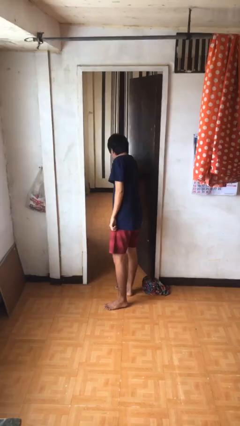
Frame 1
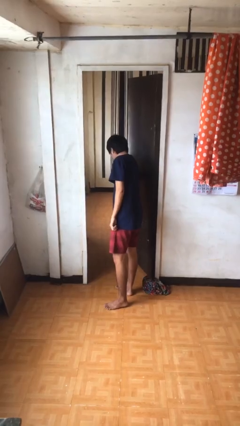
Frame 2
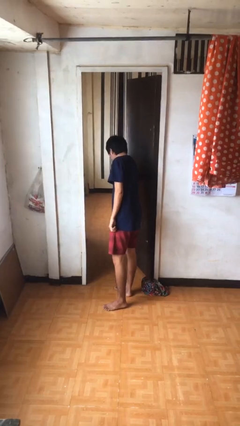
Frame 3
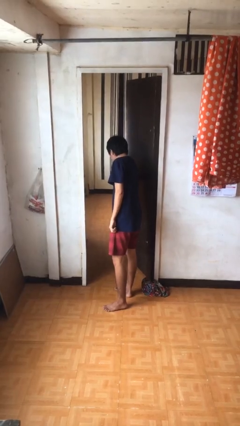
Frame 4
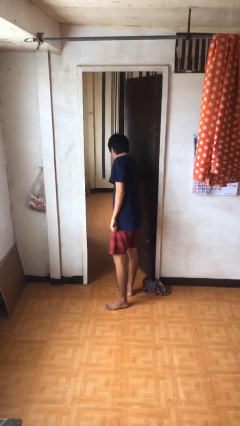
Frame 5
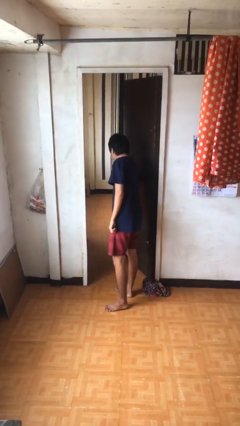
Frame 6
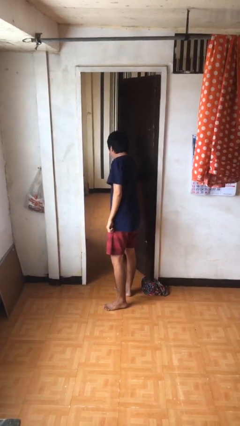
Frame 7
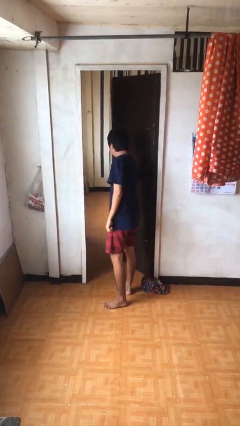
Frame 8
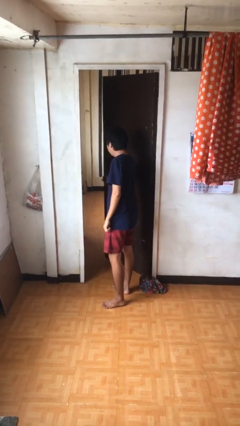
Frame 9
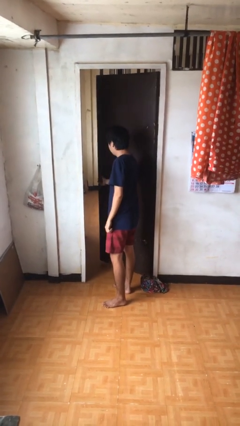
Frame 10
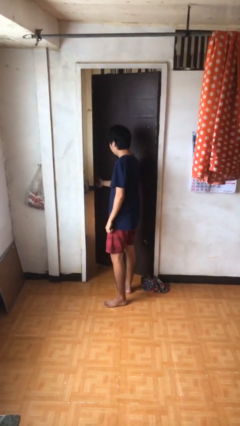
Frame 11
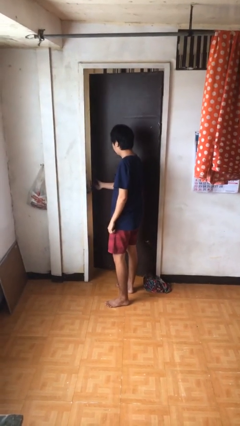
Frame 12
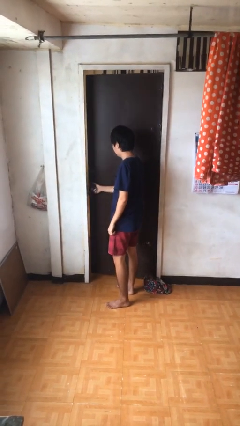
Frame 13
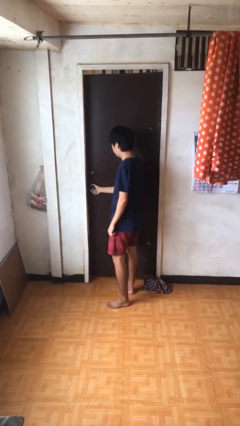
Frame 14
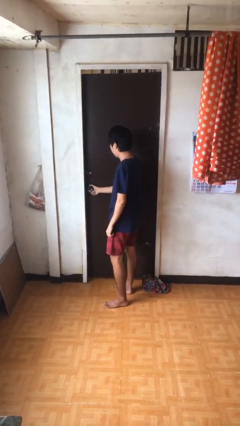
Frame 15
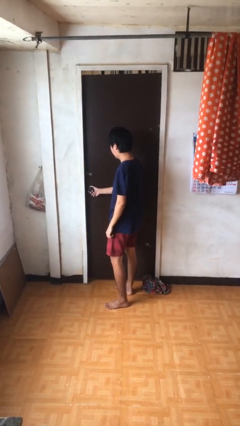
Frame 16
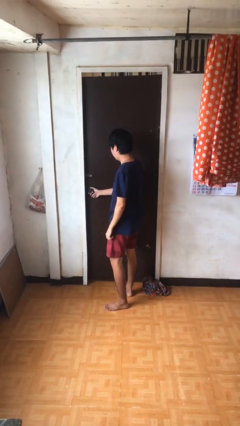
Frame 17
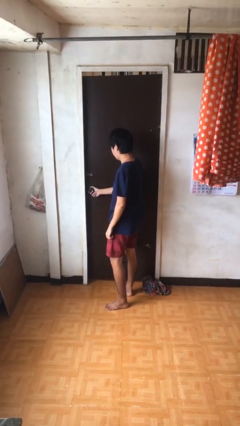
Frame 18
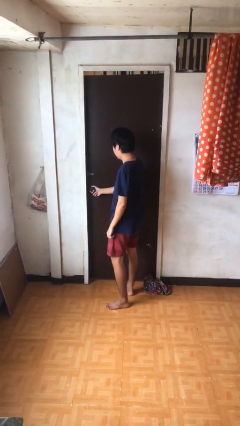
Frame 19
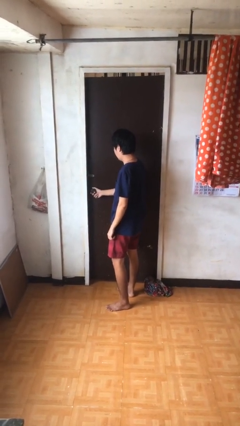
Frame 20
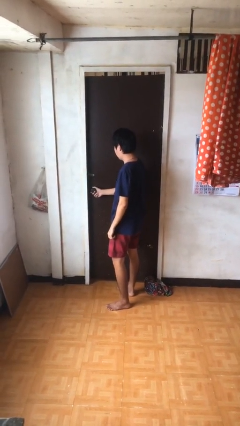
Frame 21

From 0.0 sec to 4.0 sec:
person closes facility door

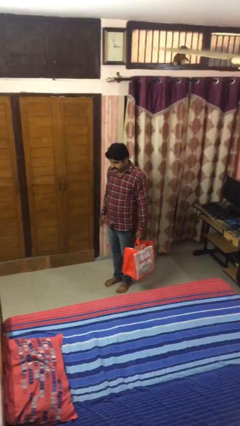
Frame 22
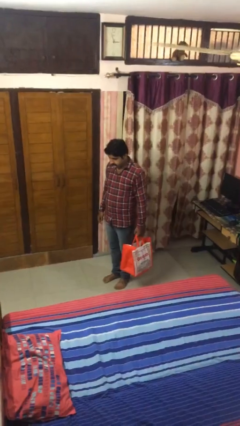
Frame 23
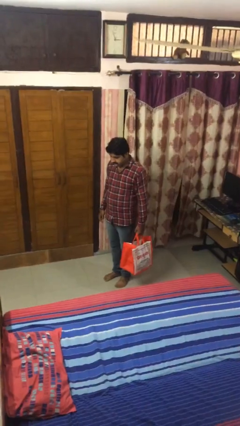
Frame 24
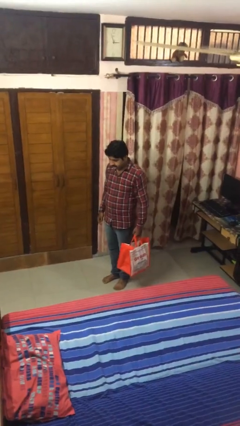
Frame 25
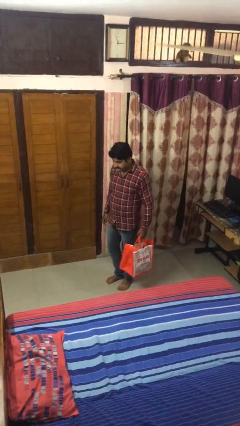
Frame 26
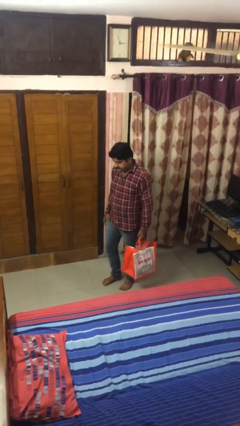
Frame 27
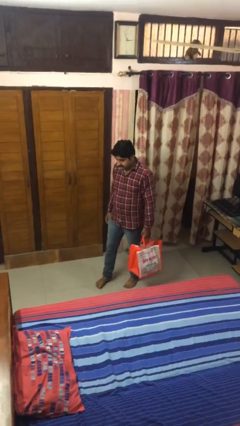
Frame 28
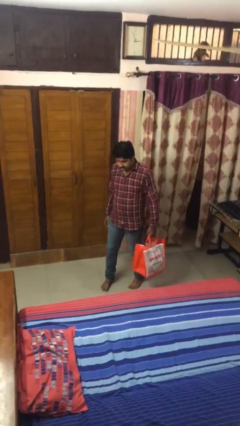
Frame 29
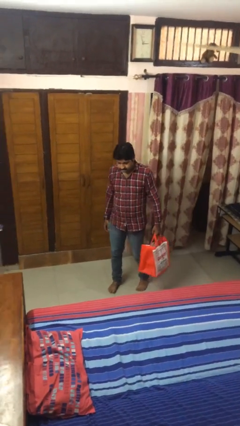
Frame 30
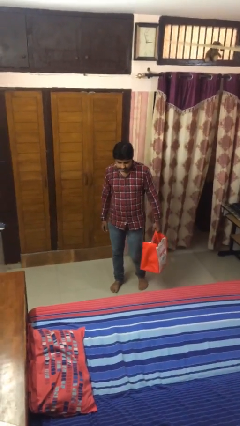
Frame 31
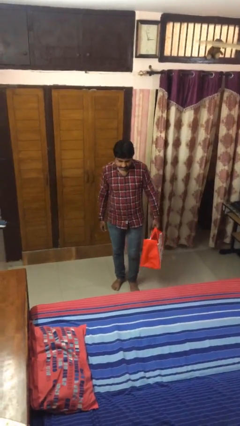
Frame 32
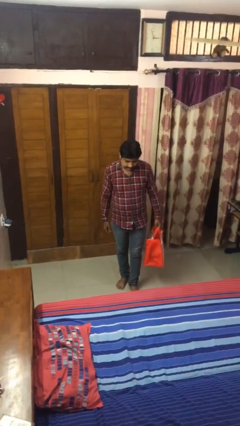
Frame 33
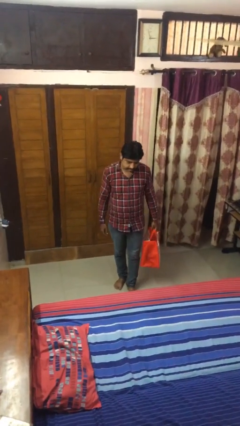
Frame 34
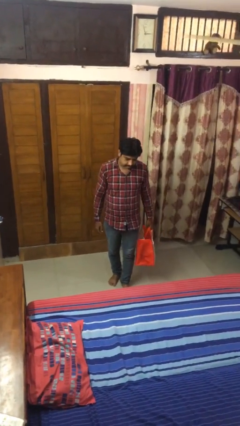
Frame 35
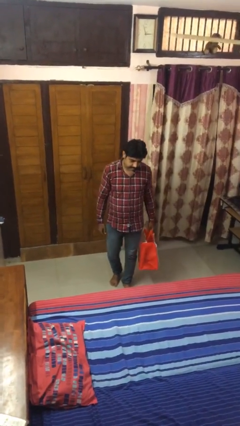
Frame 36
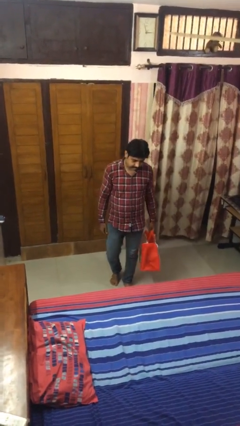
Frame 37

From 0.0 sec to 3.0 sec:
person carries groceries

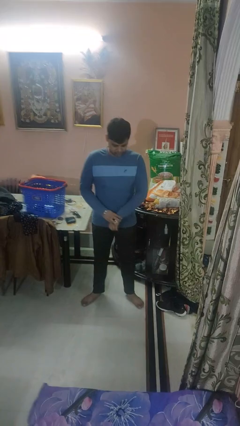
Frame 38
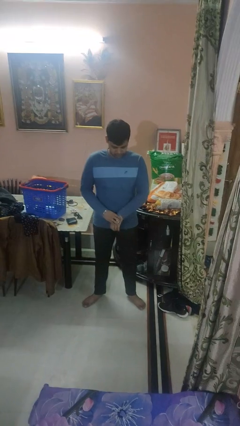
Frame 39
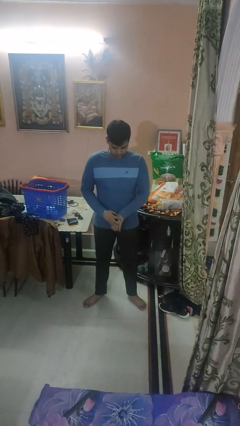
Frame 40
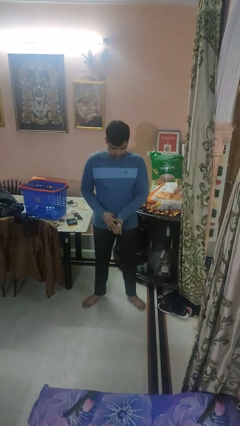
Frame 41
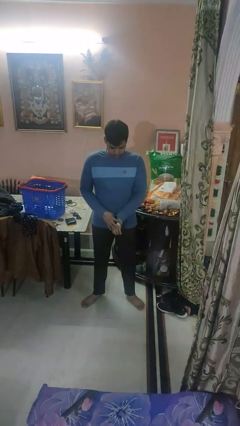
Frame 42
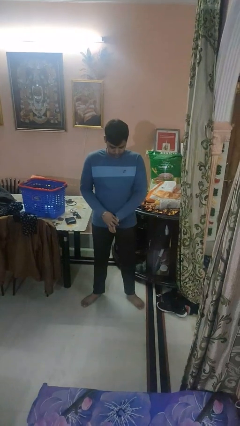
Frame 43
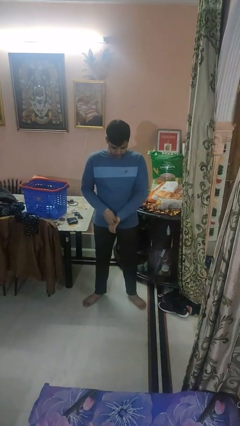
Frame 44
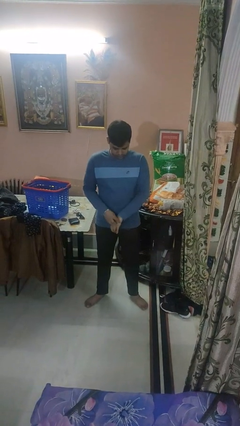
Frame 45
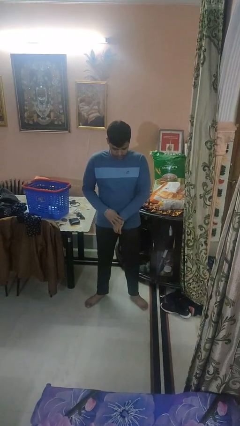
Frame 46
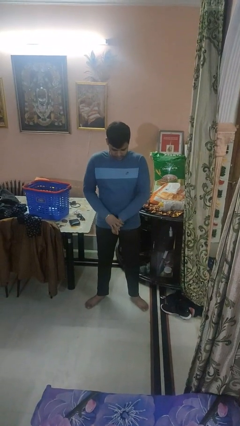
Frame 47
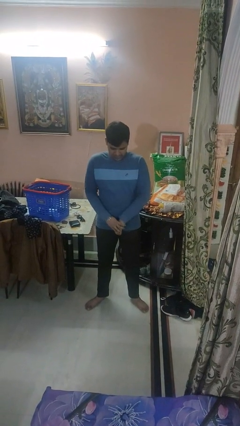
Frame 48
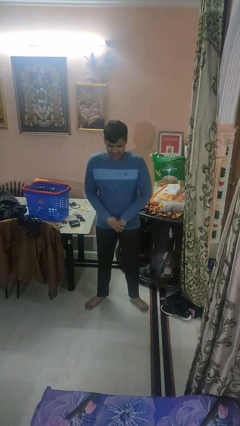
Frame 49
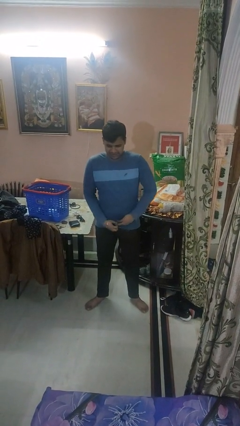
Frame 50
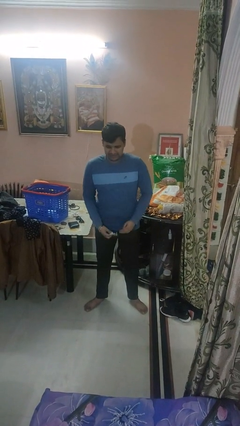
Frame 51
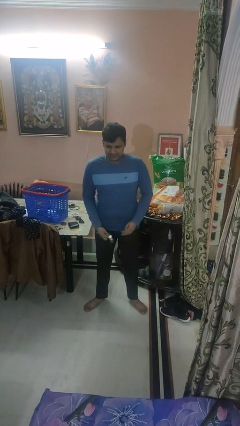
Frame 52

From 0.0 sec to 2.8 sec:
person takes off wristwatch

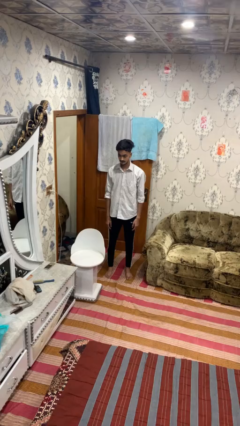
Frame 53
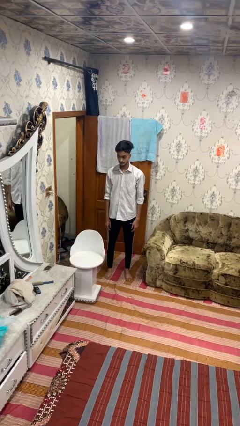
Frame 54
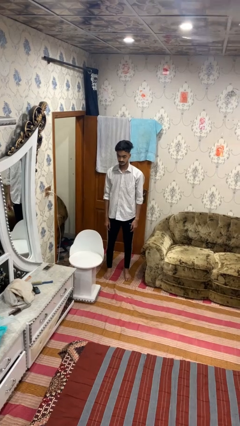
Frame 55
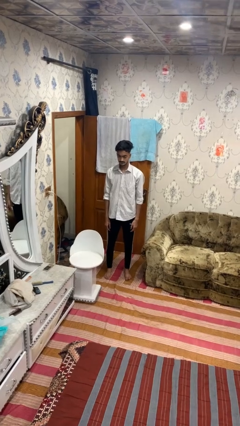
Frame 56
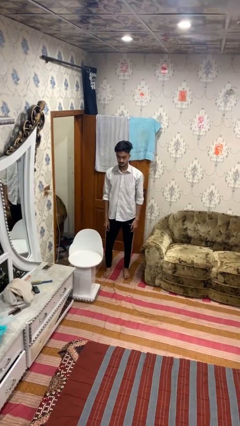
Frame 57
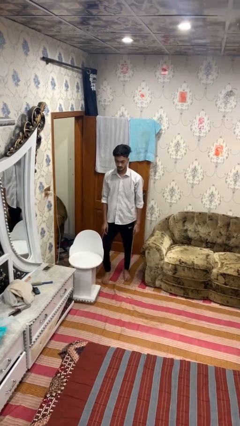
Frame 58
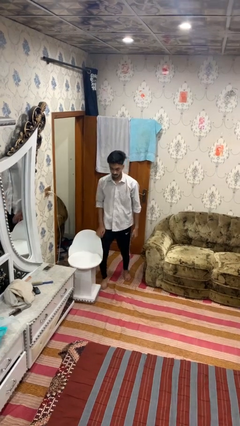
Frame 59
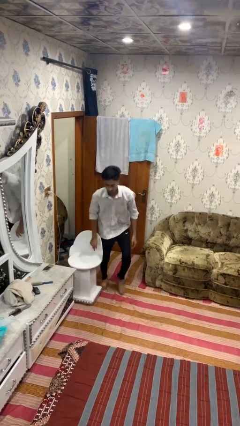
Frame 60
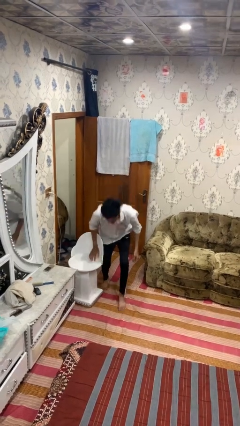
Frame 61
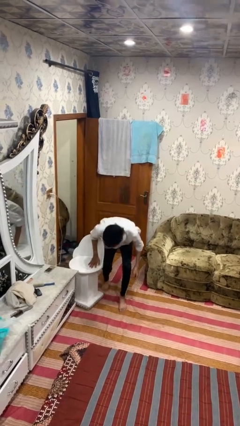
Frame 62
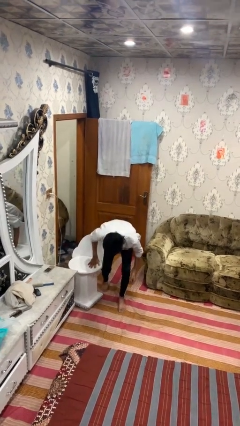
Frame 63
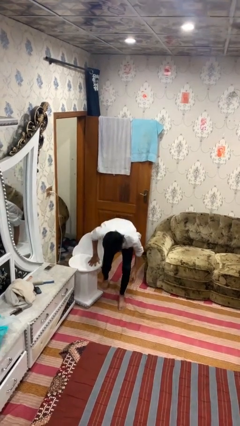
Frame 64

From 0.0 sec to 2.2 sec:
person trips on object on floor

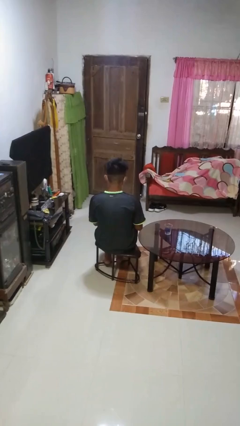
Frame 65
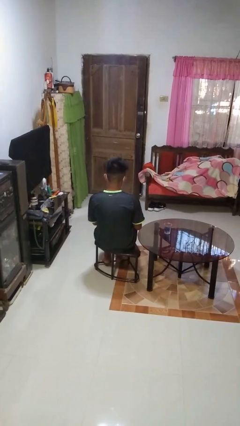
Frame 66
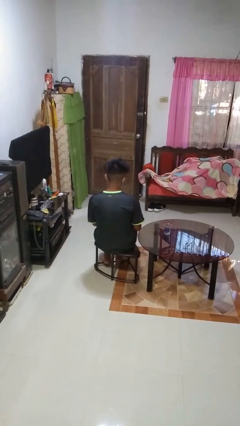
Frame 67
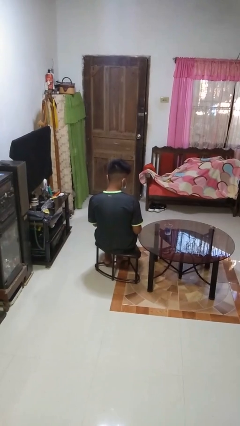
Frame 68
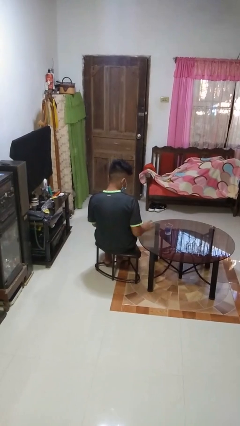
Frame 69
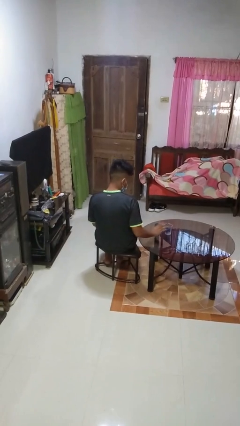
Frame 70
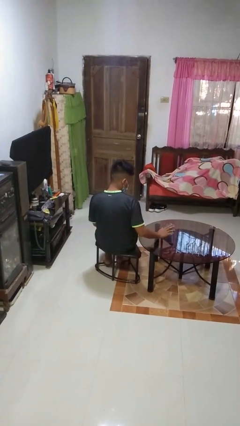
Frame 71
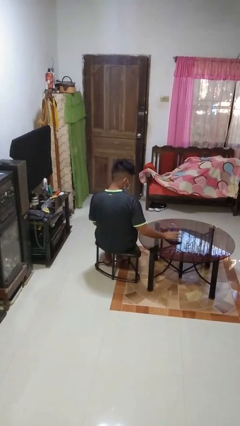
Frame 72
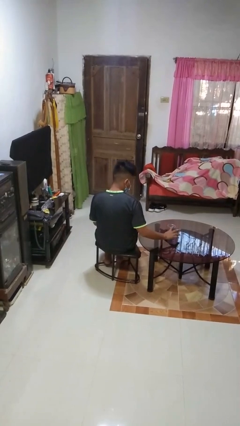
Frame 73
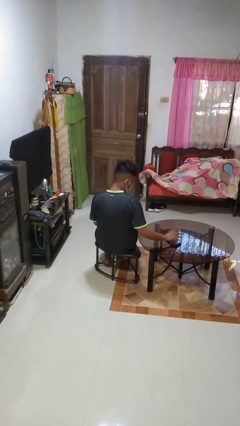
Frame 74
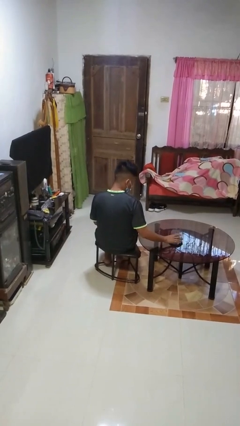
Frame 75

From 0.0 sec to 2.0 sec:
person opens beverage can

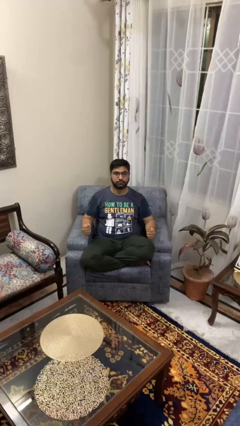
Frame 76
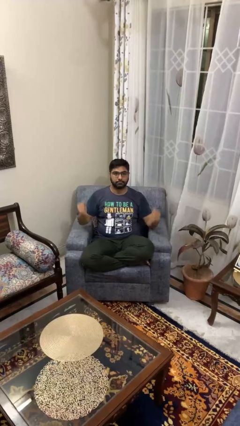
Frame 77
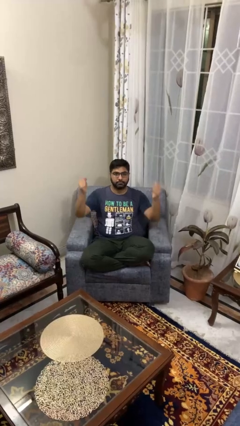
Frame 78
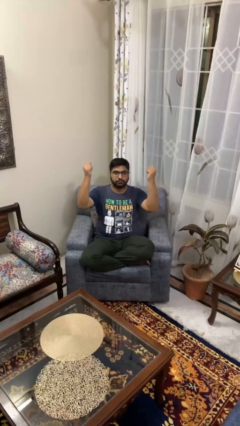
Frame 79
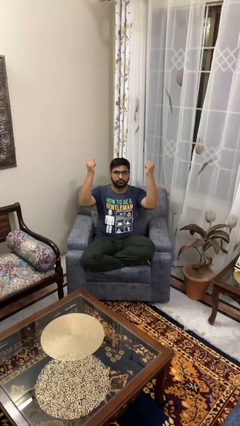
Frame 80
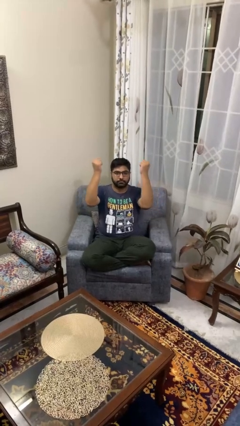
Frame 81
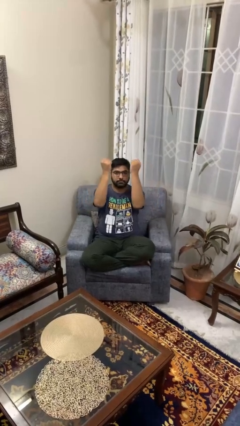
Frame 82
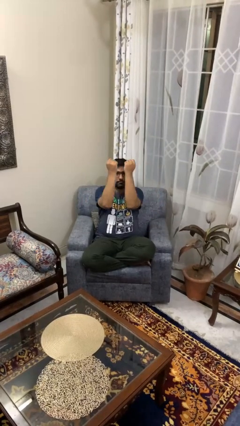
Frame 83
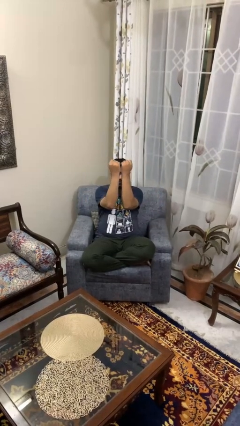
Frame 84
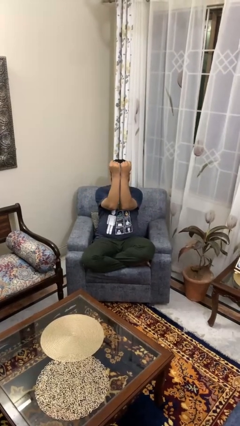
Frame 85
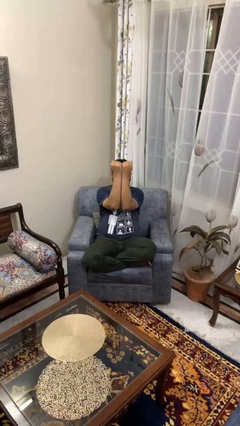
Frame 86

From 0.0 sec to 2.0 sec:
person gestures zoom in

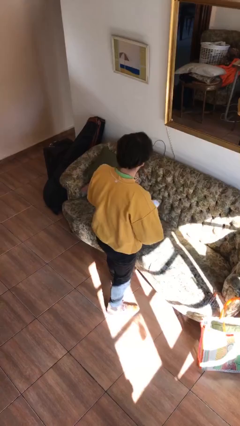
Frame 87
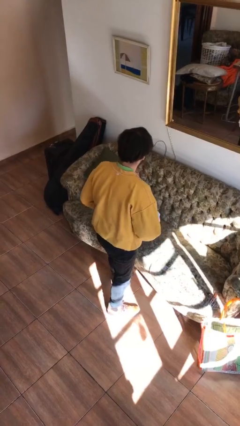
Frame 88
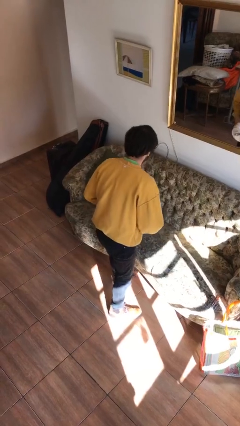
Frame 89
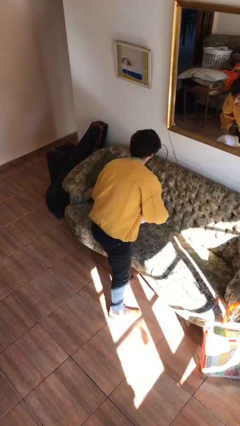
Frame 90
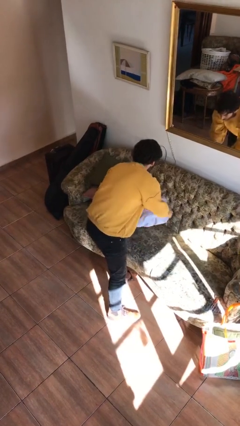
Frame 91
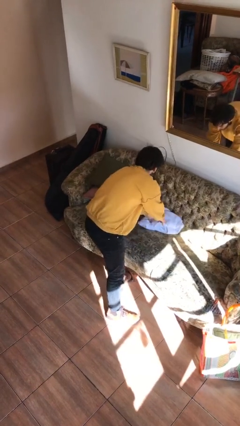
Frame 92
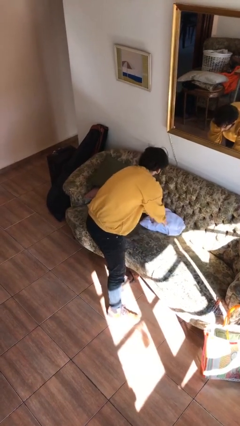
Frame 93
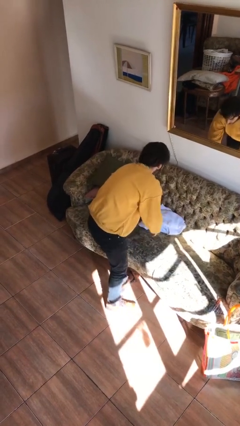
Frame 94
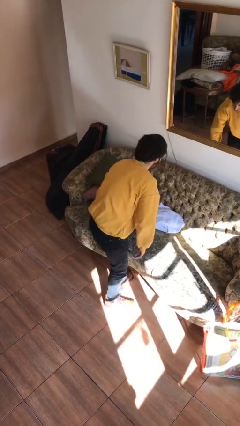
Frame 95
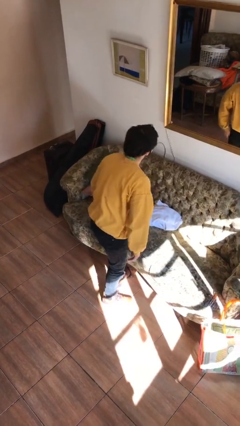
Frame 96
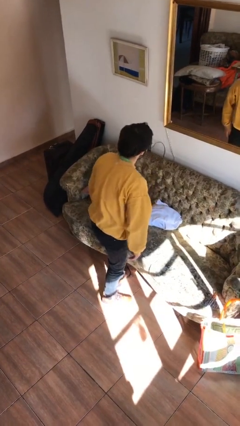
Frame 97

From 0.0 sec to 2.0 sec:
person puts down object on couch
